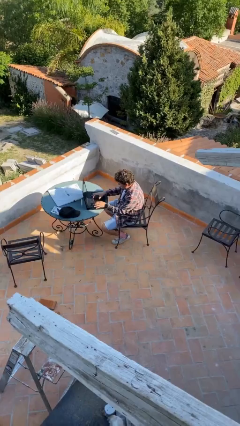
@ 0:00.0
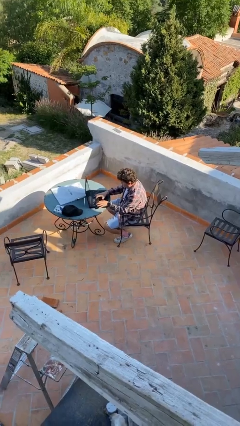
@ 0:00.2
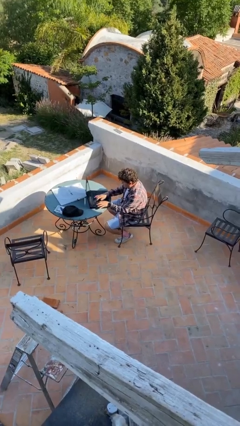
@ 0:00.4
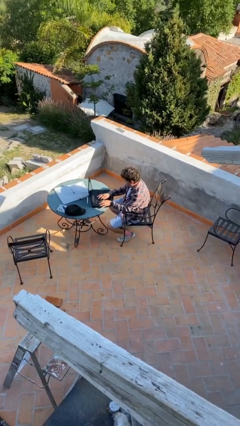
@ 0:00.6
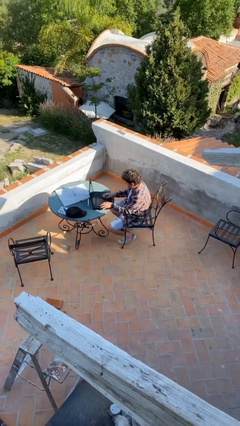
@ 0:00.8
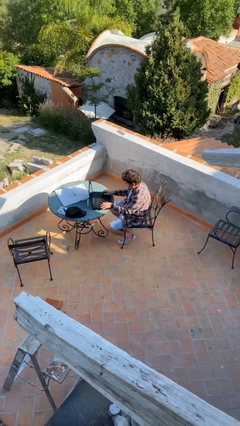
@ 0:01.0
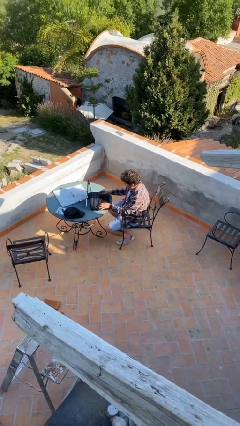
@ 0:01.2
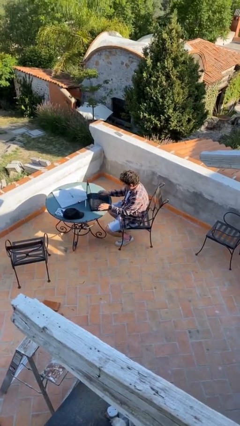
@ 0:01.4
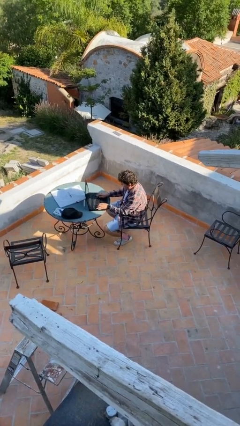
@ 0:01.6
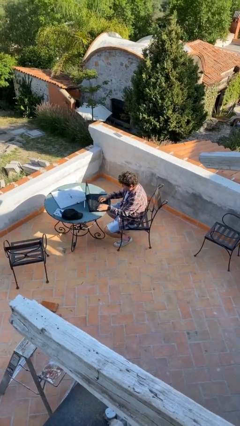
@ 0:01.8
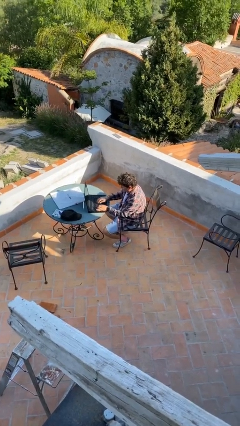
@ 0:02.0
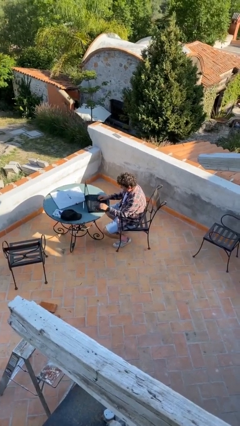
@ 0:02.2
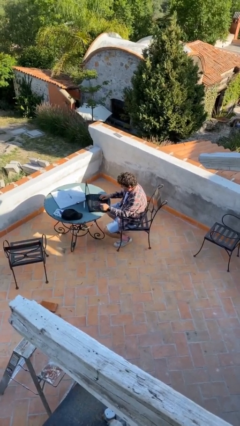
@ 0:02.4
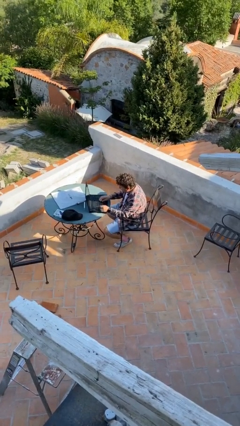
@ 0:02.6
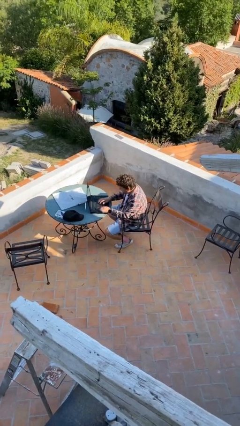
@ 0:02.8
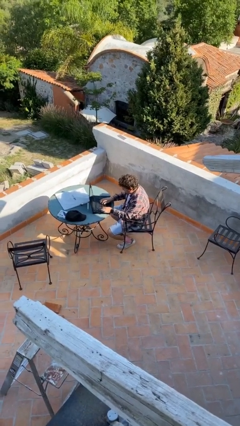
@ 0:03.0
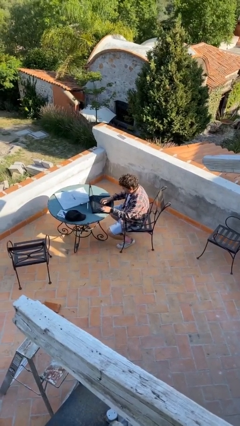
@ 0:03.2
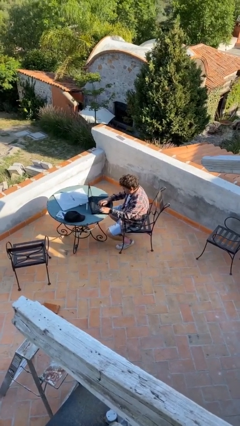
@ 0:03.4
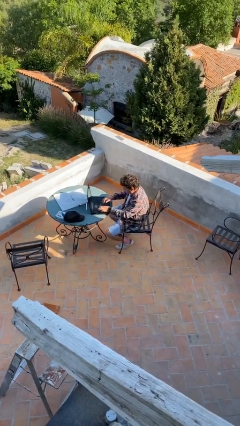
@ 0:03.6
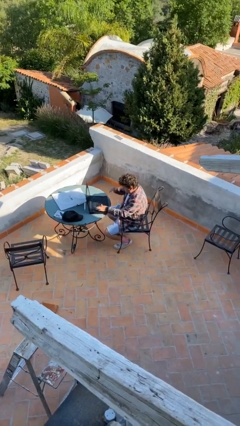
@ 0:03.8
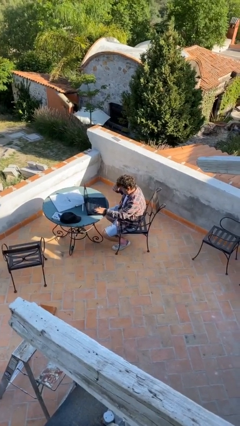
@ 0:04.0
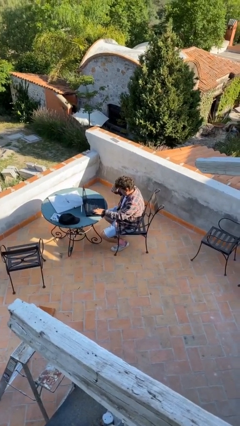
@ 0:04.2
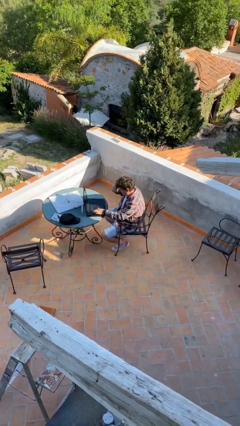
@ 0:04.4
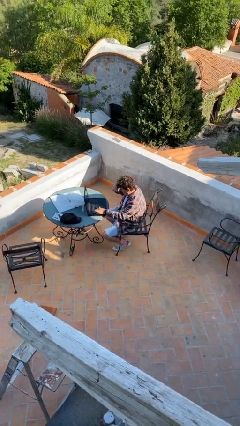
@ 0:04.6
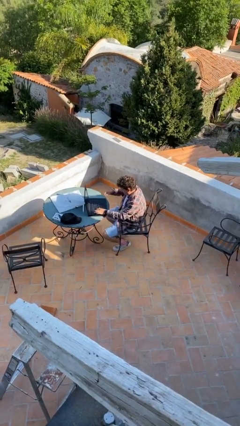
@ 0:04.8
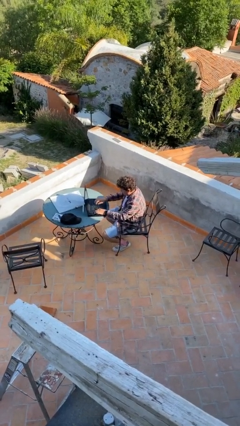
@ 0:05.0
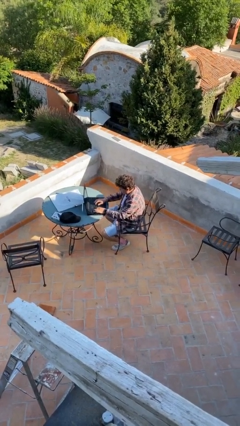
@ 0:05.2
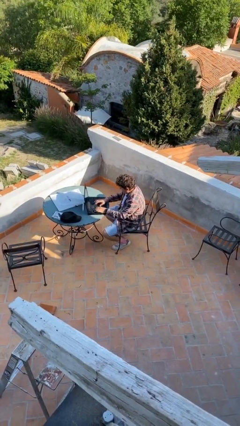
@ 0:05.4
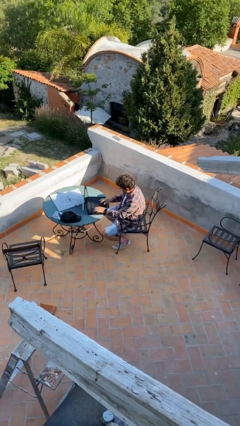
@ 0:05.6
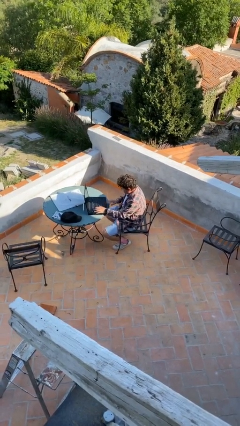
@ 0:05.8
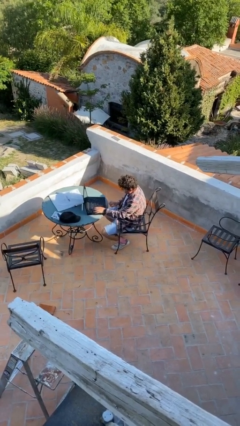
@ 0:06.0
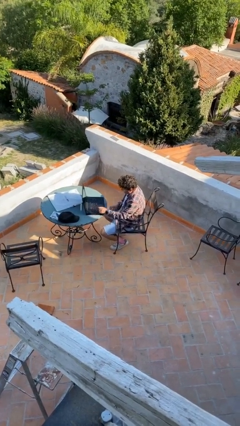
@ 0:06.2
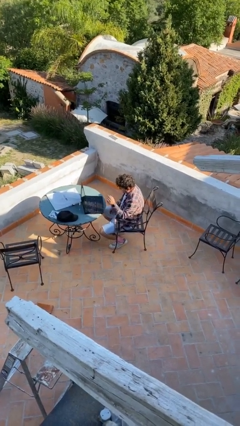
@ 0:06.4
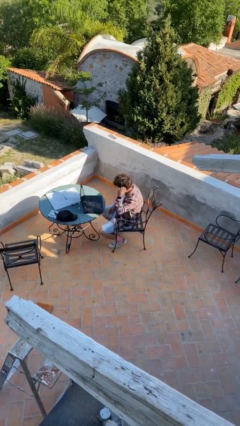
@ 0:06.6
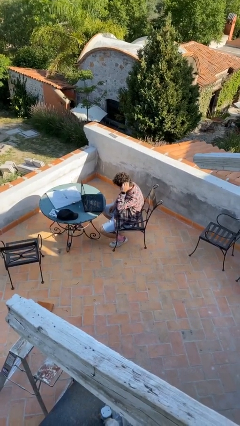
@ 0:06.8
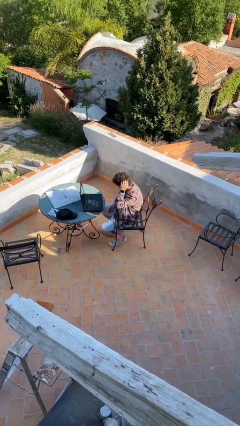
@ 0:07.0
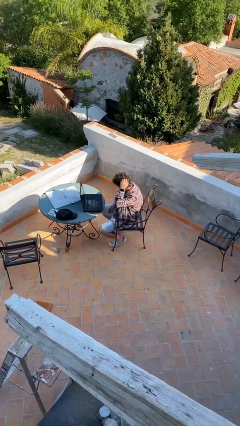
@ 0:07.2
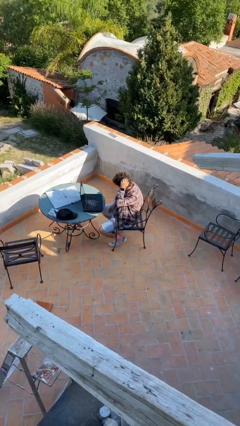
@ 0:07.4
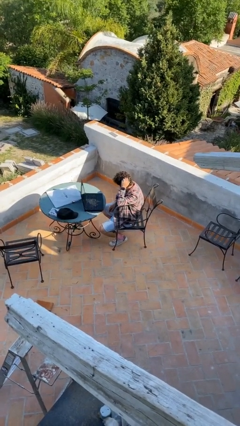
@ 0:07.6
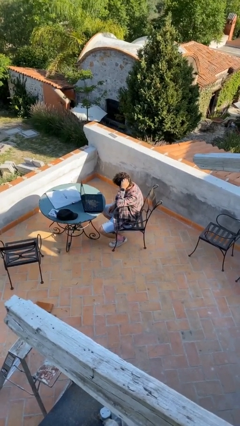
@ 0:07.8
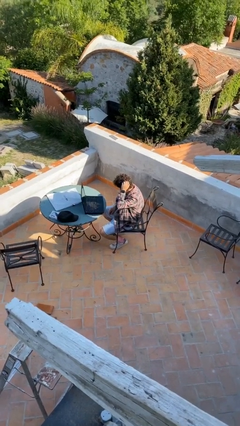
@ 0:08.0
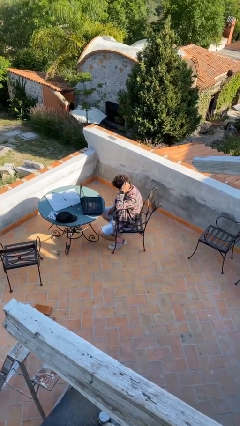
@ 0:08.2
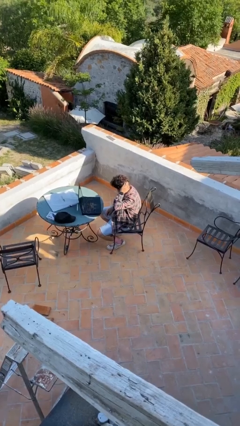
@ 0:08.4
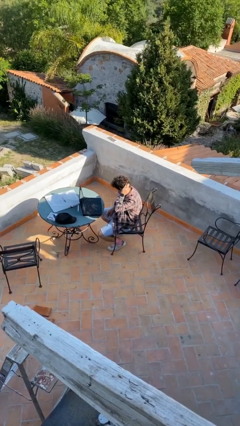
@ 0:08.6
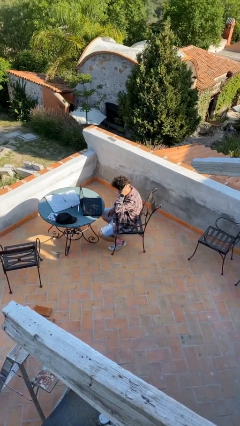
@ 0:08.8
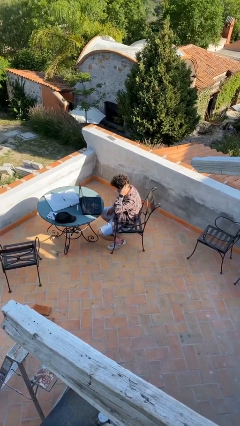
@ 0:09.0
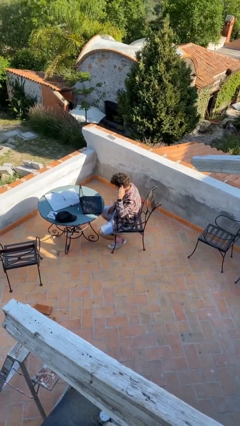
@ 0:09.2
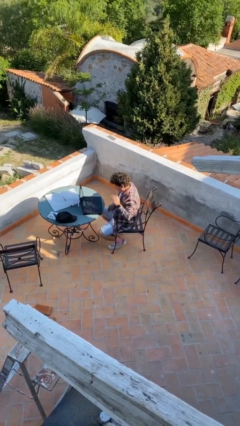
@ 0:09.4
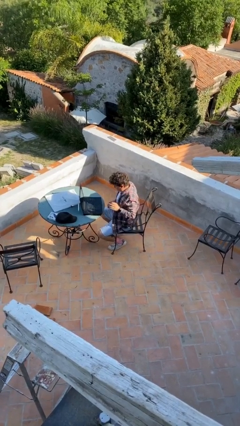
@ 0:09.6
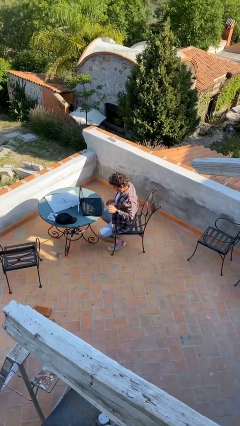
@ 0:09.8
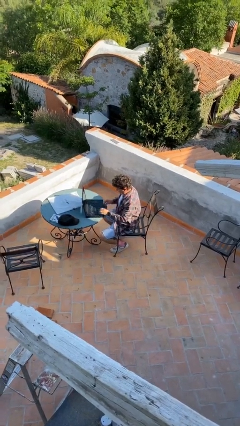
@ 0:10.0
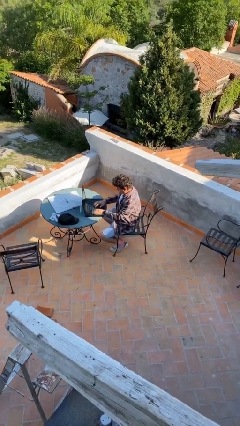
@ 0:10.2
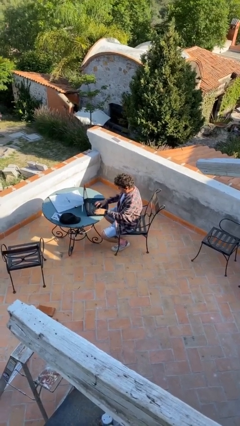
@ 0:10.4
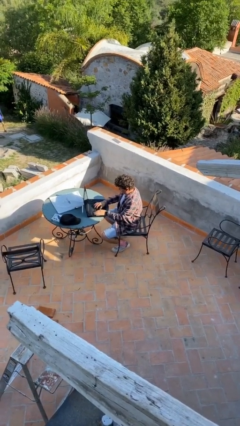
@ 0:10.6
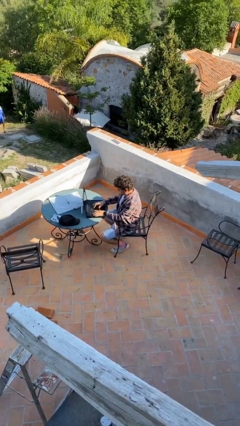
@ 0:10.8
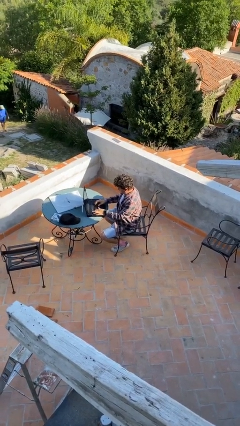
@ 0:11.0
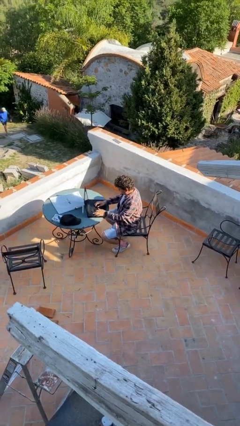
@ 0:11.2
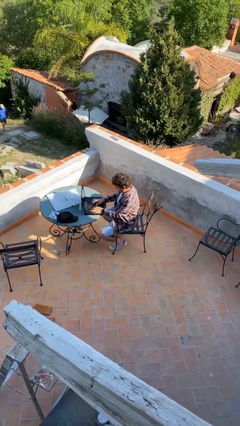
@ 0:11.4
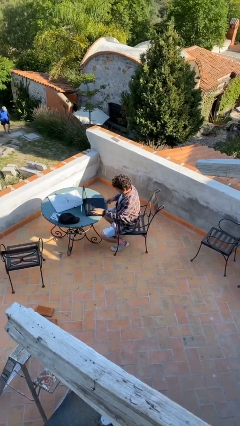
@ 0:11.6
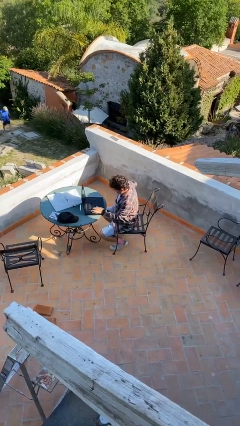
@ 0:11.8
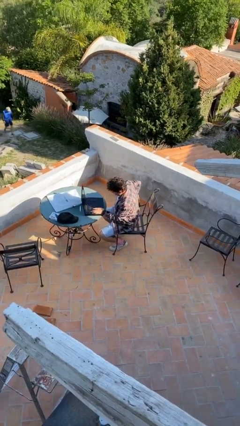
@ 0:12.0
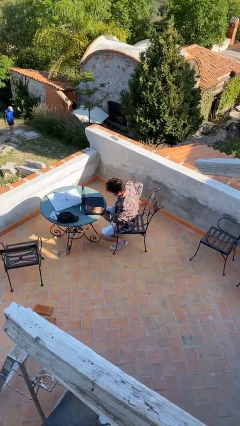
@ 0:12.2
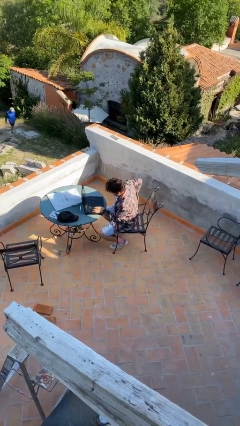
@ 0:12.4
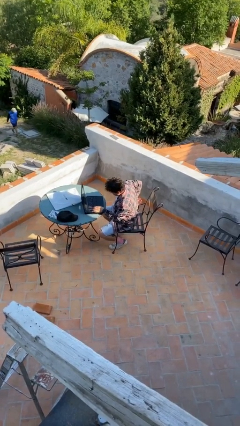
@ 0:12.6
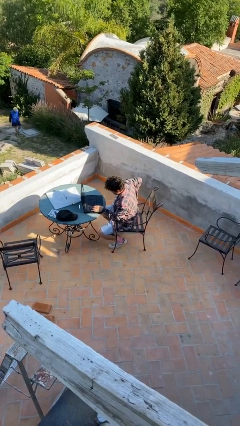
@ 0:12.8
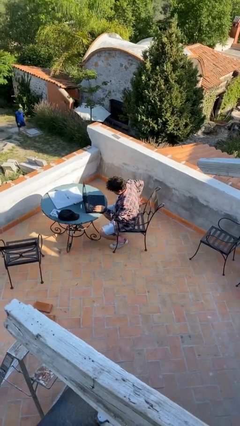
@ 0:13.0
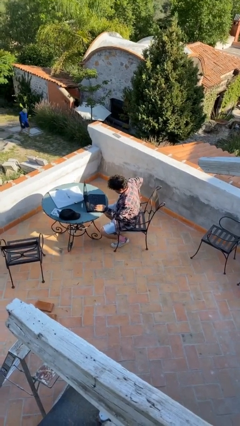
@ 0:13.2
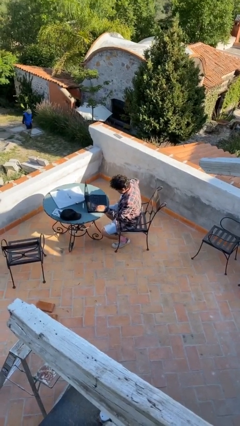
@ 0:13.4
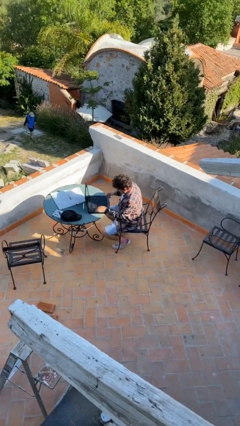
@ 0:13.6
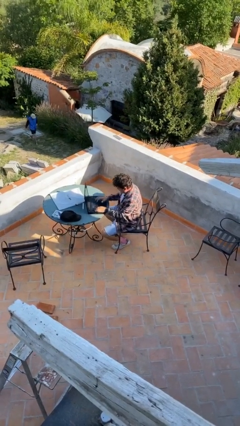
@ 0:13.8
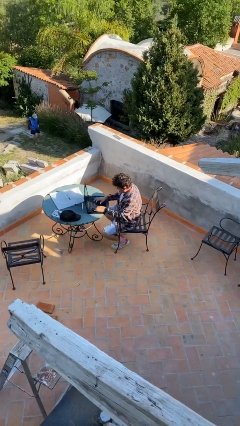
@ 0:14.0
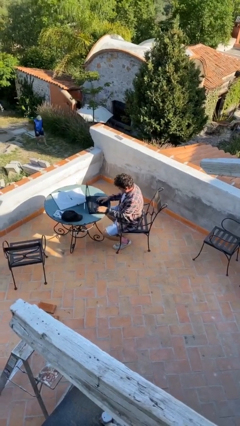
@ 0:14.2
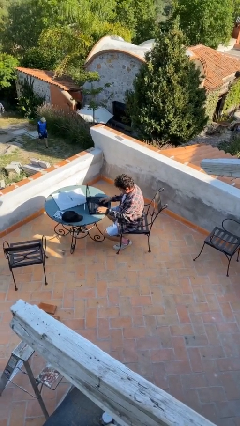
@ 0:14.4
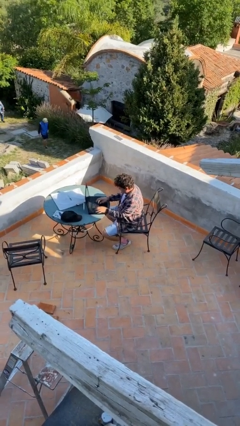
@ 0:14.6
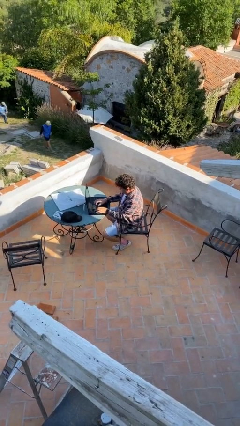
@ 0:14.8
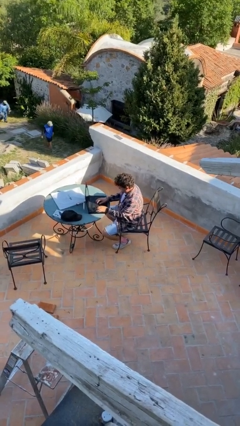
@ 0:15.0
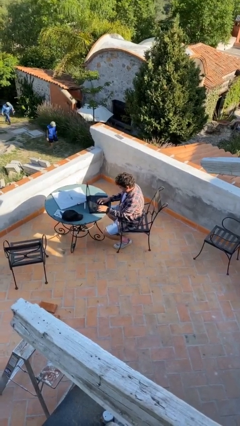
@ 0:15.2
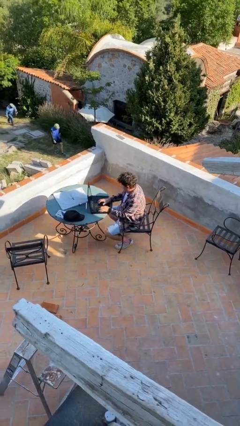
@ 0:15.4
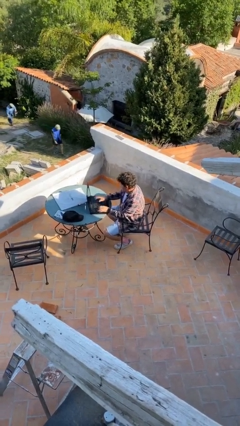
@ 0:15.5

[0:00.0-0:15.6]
person interacts with laptop

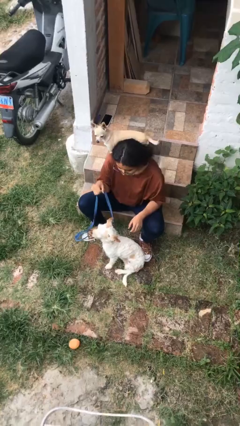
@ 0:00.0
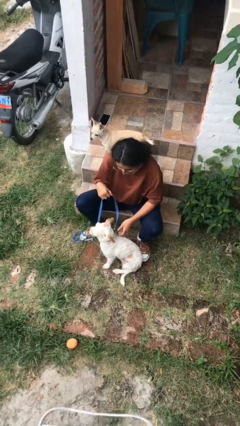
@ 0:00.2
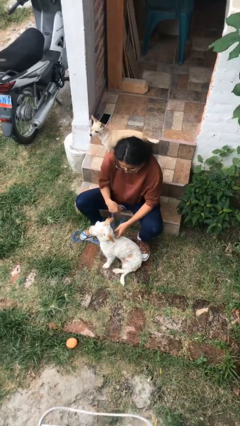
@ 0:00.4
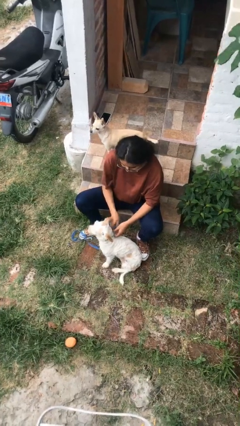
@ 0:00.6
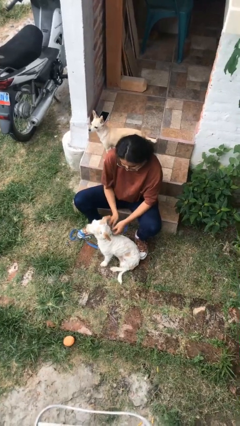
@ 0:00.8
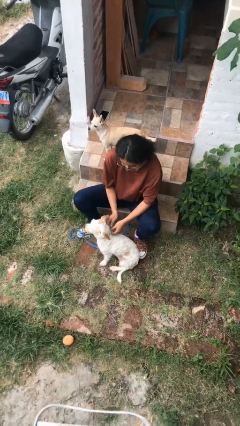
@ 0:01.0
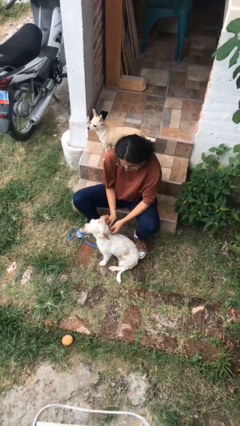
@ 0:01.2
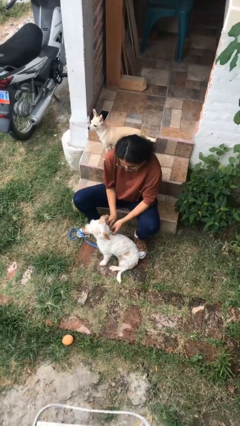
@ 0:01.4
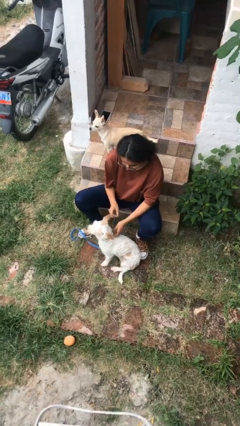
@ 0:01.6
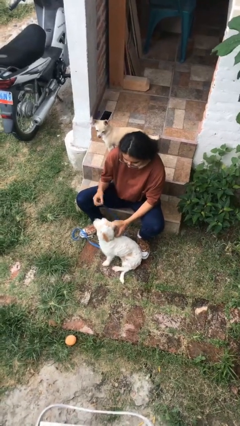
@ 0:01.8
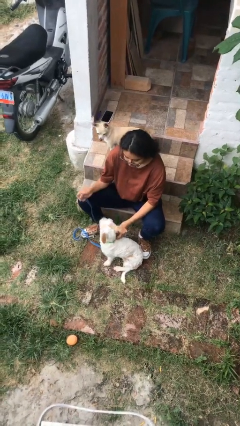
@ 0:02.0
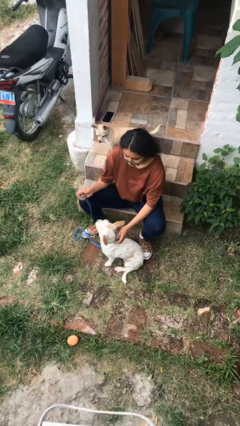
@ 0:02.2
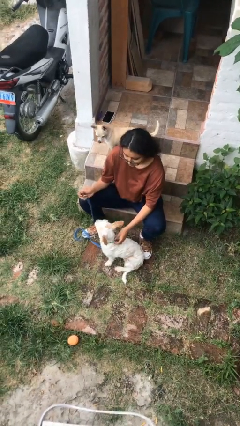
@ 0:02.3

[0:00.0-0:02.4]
person unattaches leash from dog
